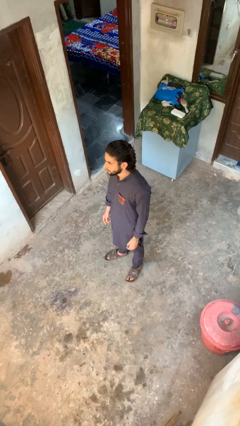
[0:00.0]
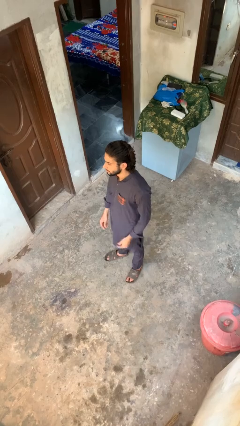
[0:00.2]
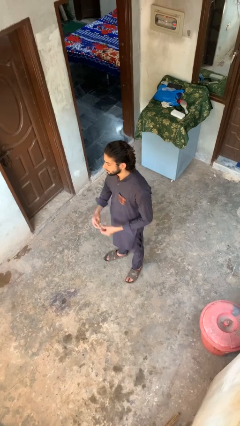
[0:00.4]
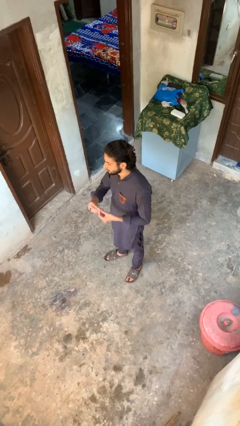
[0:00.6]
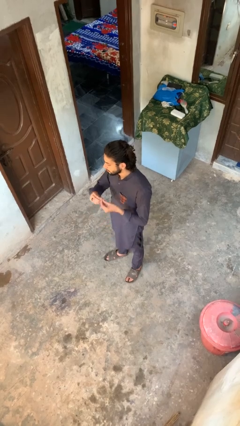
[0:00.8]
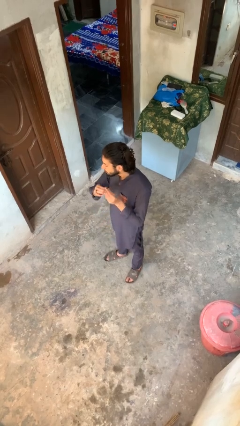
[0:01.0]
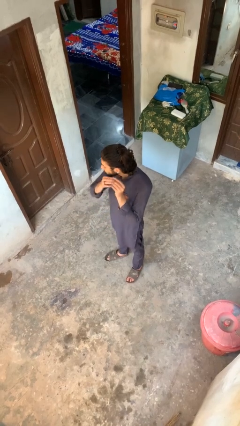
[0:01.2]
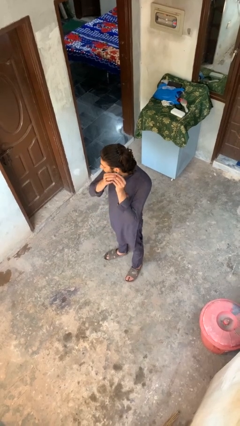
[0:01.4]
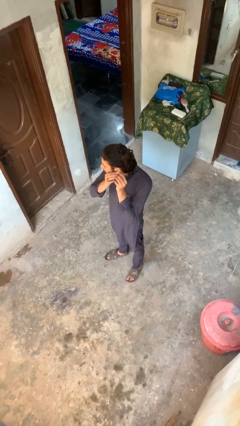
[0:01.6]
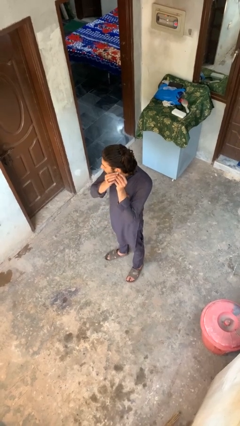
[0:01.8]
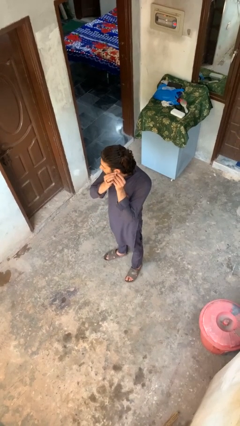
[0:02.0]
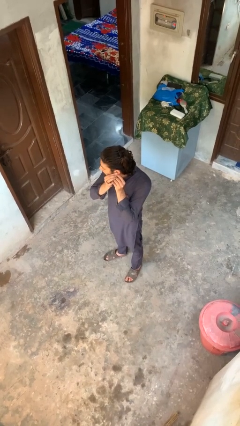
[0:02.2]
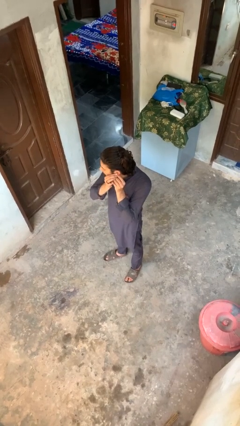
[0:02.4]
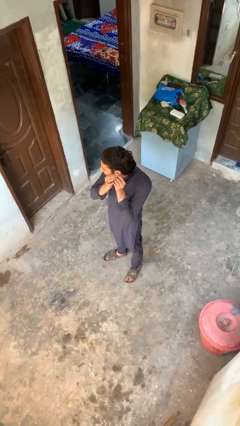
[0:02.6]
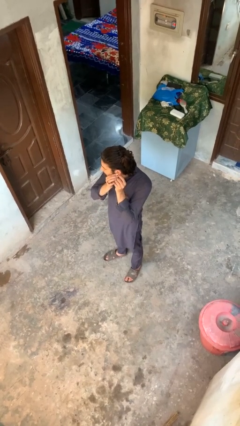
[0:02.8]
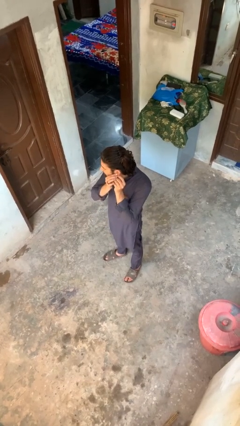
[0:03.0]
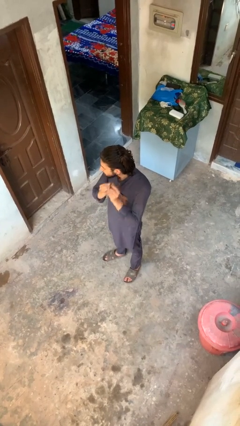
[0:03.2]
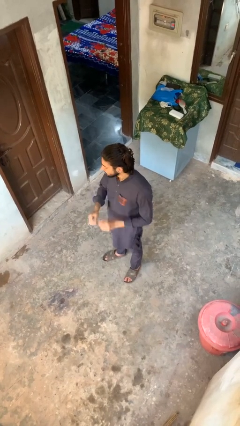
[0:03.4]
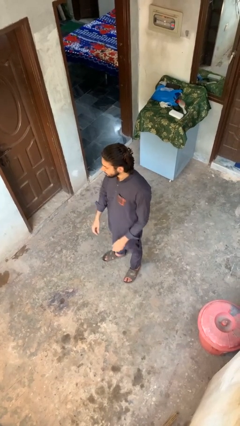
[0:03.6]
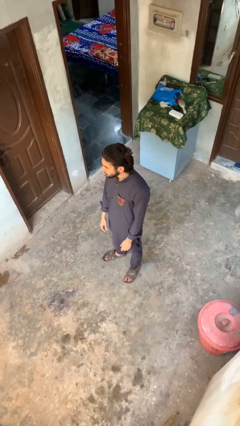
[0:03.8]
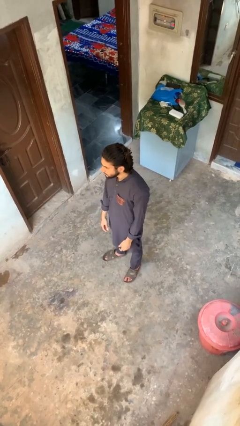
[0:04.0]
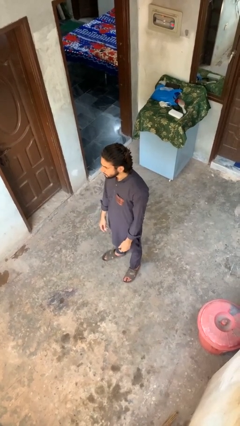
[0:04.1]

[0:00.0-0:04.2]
person puts on earrings

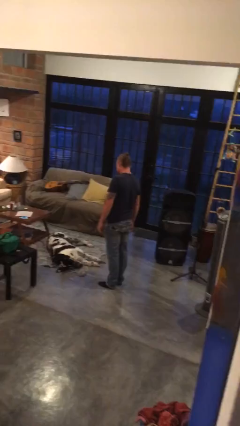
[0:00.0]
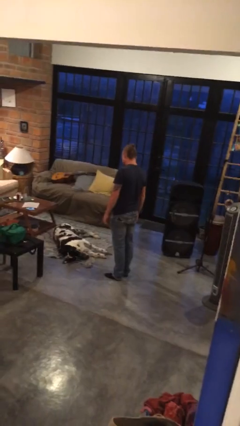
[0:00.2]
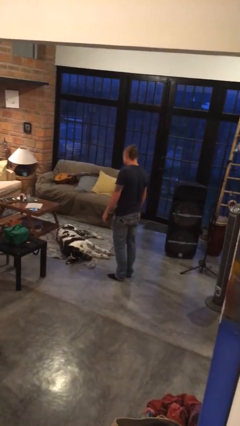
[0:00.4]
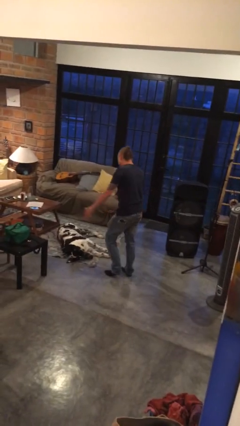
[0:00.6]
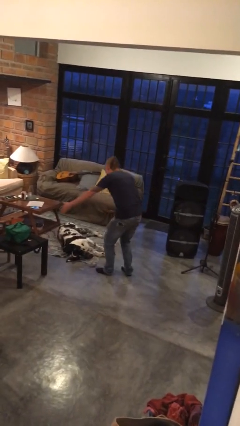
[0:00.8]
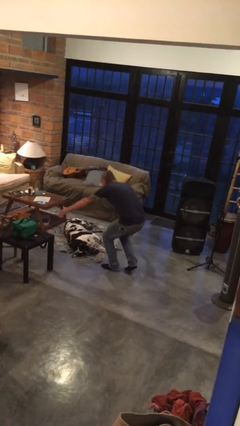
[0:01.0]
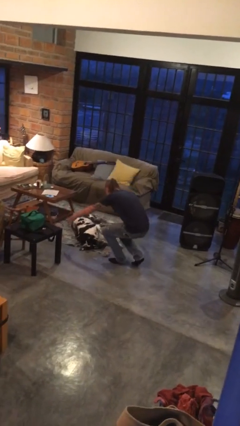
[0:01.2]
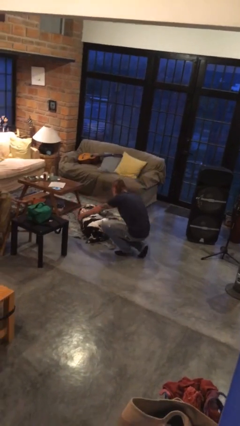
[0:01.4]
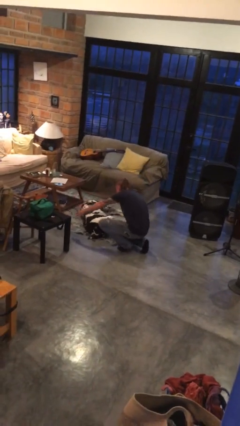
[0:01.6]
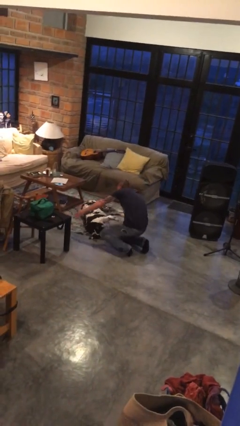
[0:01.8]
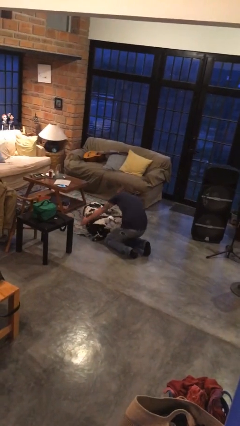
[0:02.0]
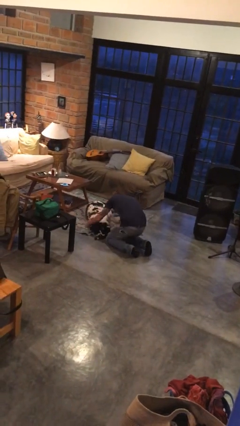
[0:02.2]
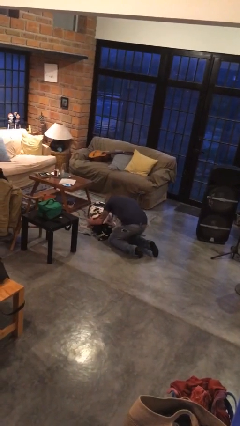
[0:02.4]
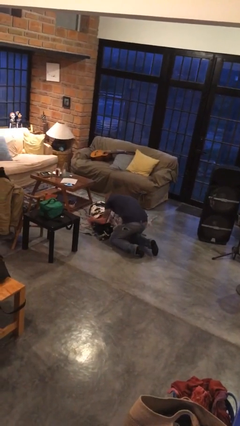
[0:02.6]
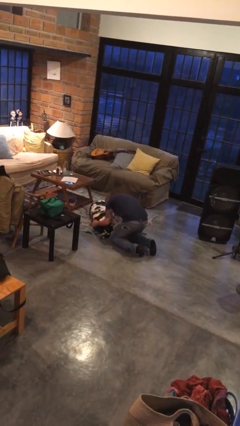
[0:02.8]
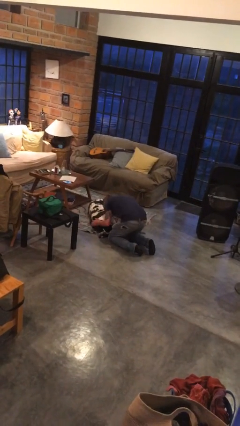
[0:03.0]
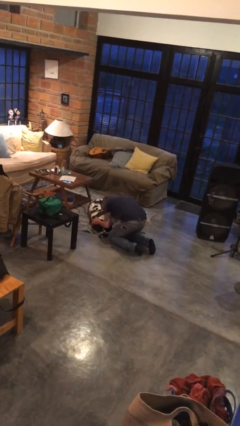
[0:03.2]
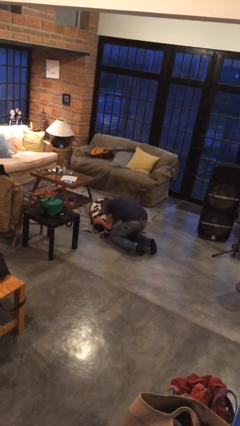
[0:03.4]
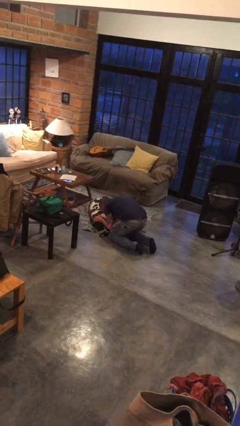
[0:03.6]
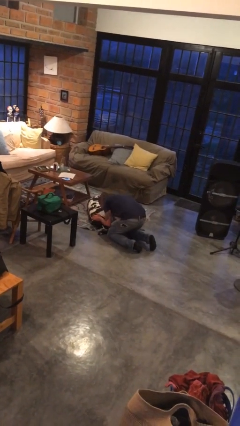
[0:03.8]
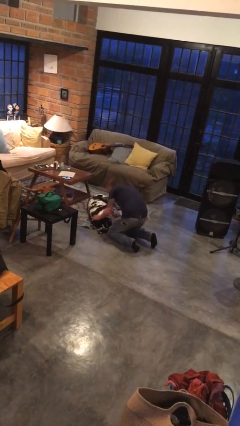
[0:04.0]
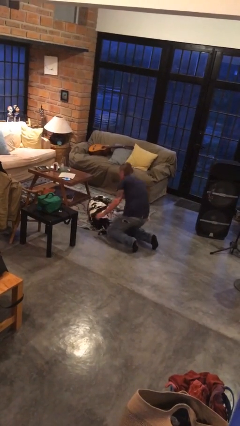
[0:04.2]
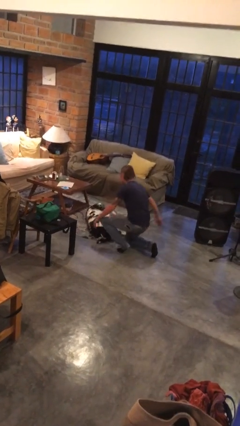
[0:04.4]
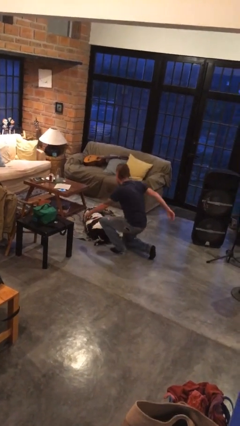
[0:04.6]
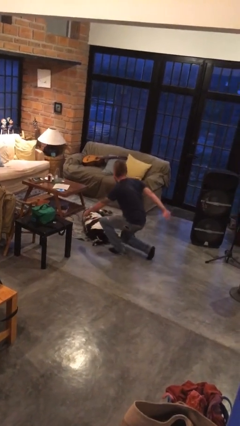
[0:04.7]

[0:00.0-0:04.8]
person hugs dog

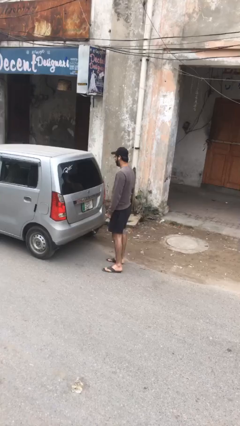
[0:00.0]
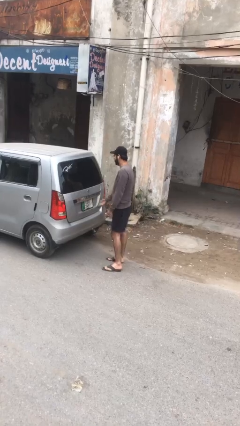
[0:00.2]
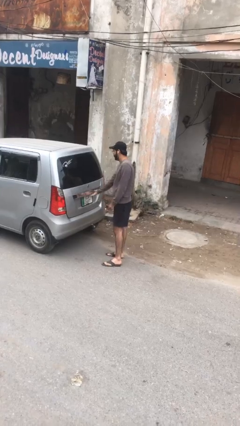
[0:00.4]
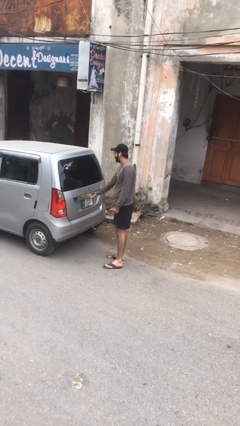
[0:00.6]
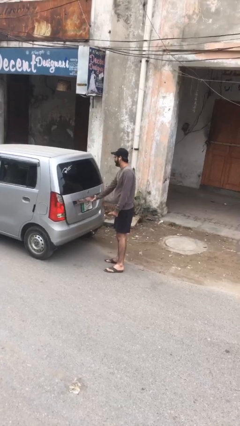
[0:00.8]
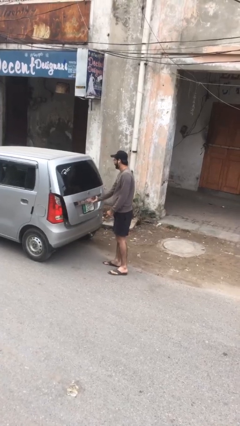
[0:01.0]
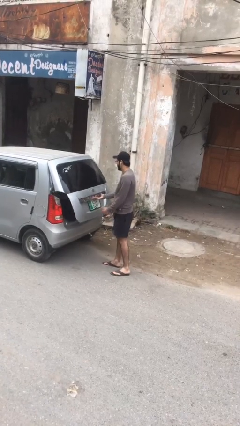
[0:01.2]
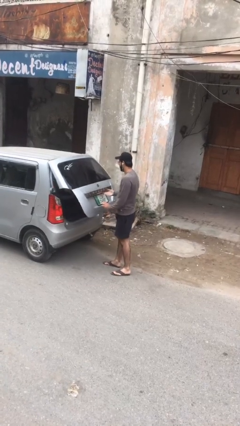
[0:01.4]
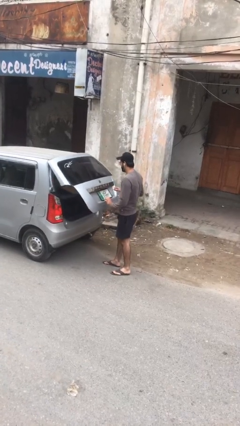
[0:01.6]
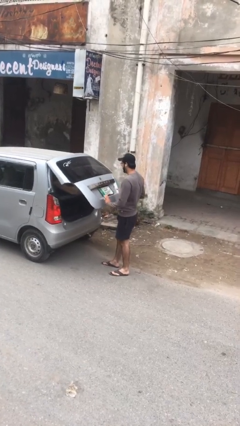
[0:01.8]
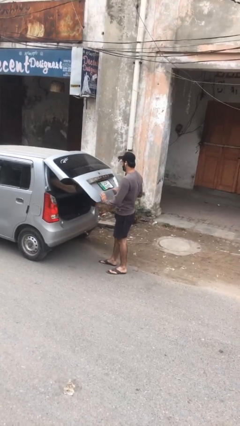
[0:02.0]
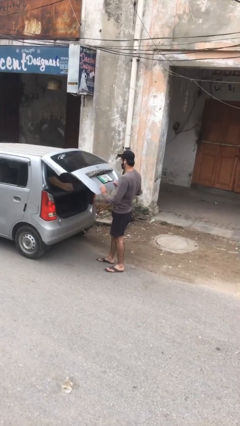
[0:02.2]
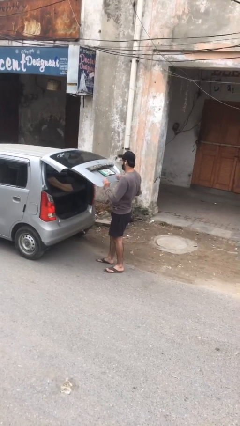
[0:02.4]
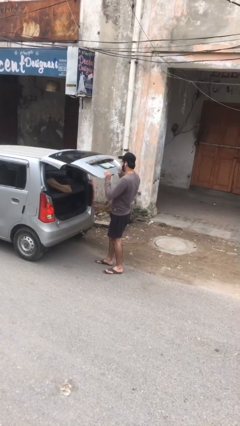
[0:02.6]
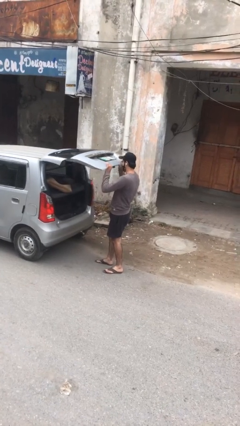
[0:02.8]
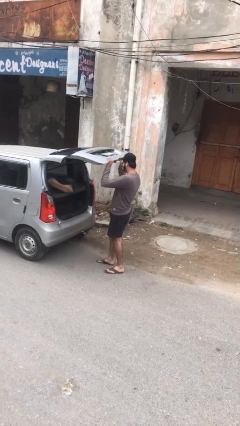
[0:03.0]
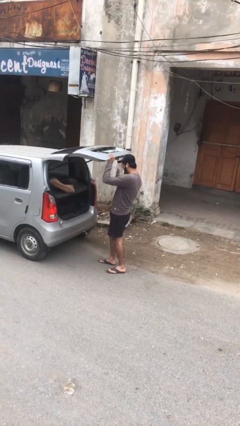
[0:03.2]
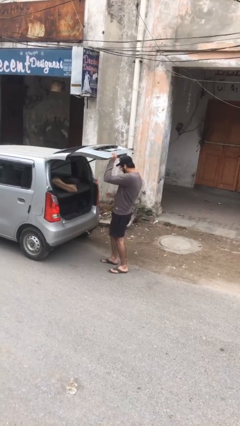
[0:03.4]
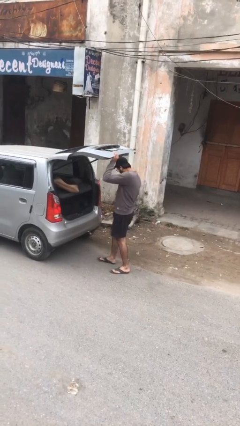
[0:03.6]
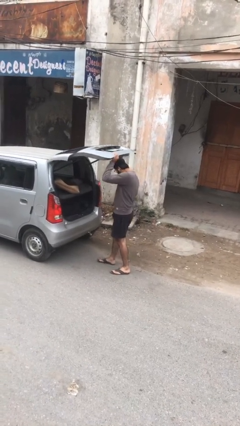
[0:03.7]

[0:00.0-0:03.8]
person opens car trunk

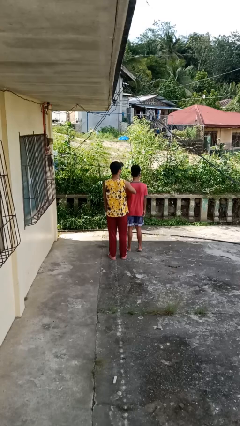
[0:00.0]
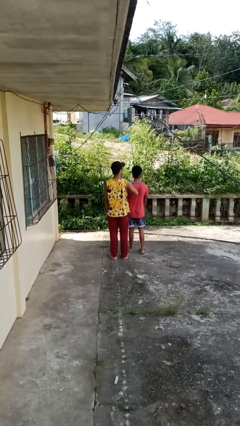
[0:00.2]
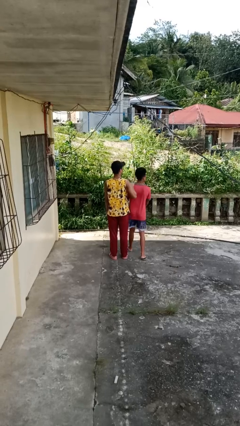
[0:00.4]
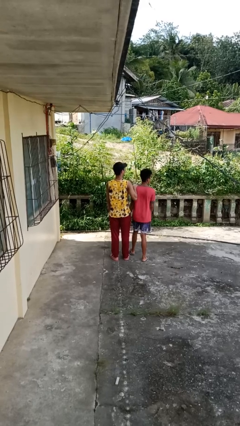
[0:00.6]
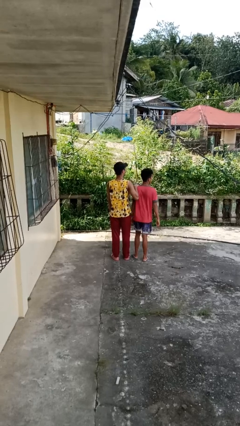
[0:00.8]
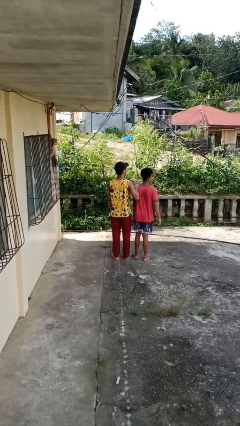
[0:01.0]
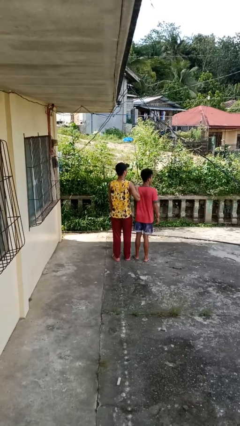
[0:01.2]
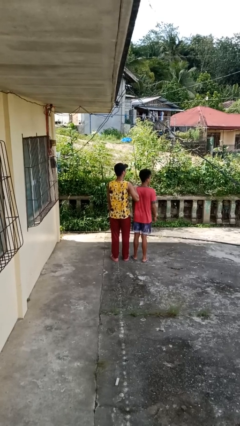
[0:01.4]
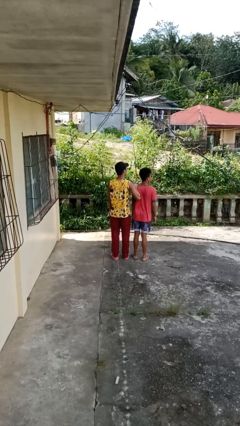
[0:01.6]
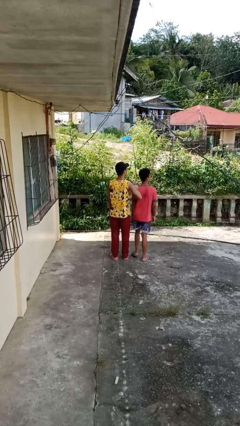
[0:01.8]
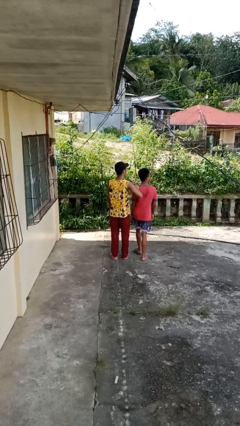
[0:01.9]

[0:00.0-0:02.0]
person grabs person by shoulder

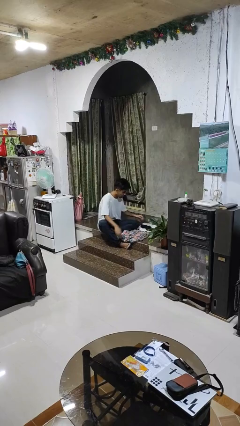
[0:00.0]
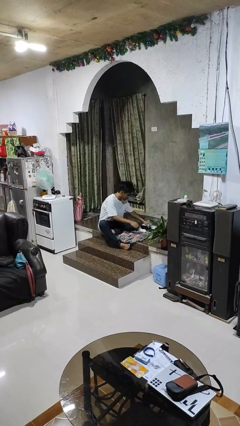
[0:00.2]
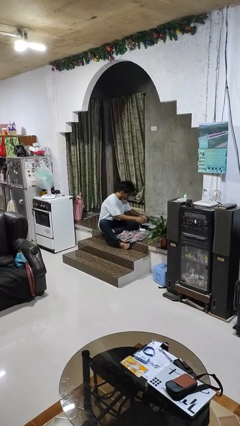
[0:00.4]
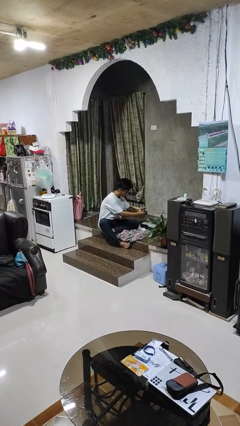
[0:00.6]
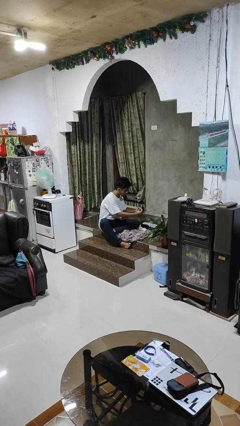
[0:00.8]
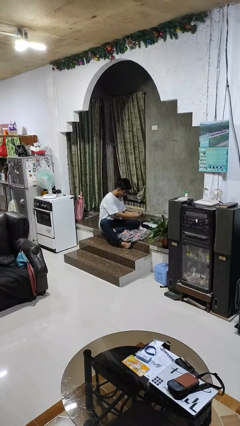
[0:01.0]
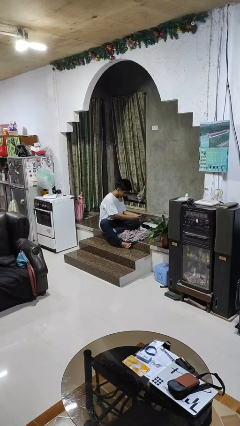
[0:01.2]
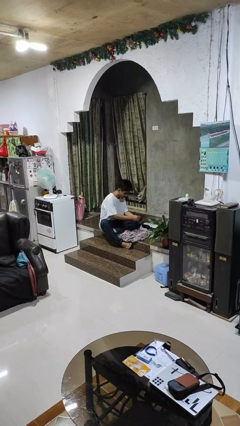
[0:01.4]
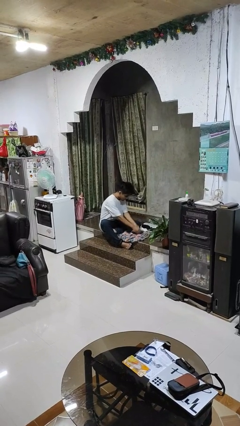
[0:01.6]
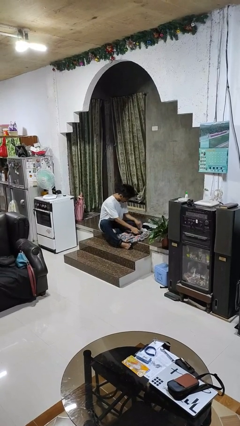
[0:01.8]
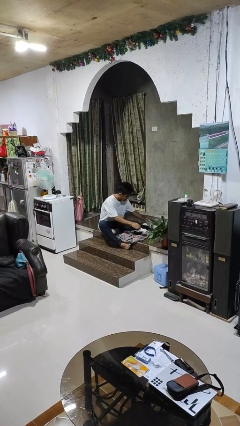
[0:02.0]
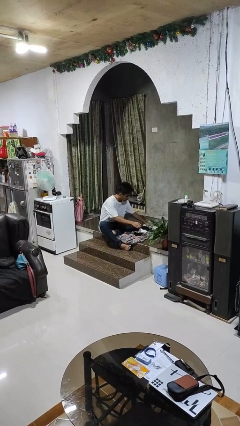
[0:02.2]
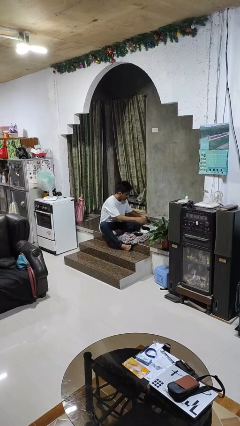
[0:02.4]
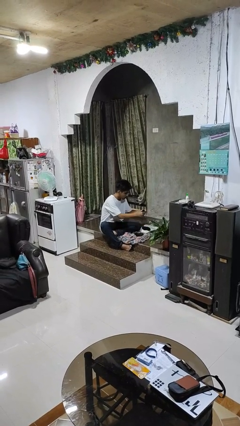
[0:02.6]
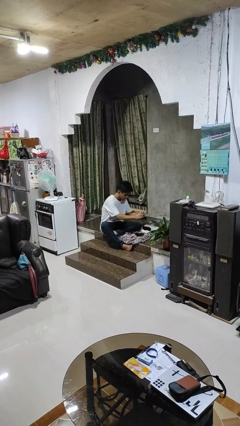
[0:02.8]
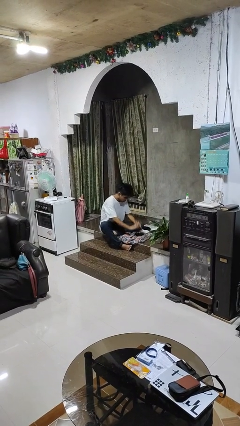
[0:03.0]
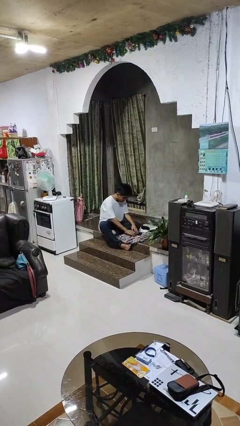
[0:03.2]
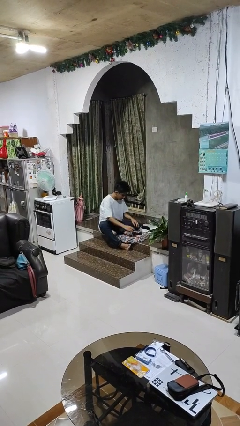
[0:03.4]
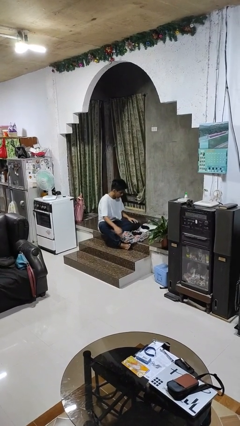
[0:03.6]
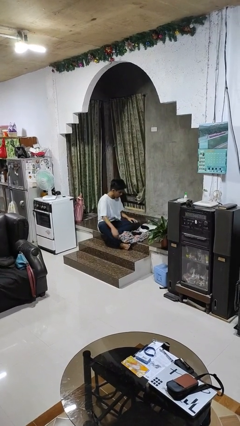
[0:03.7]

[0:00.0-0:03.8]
person folds socks
